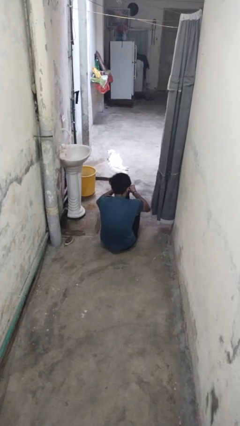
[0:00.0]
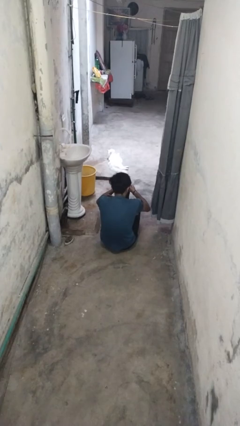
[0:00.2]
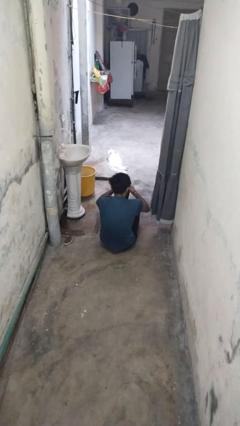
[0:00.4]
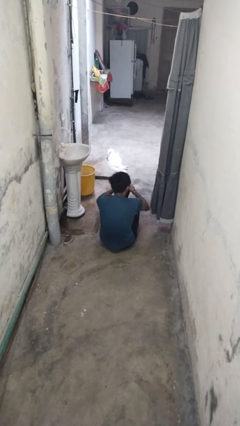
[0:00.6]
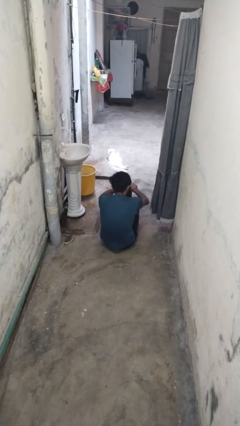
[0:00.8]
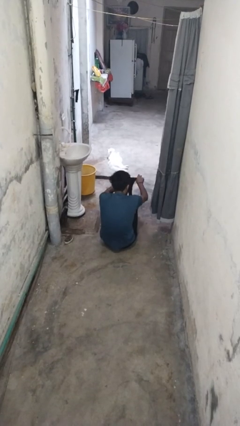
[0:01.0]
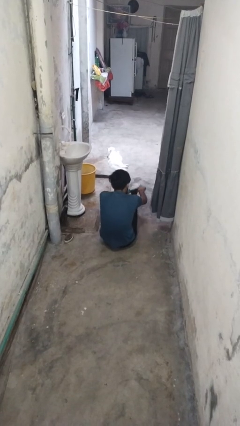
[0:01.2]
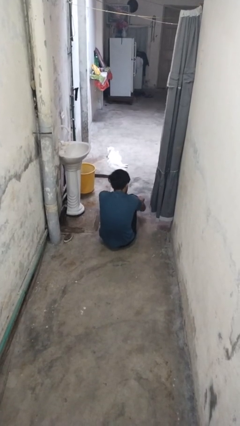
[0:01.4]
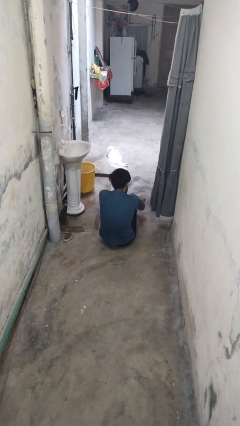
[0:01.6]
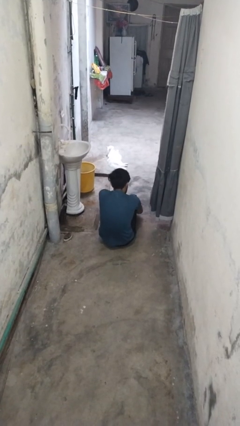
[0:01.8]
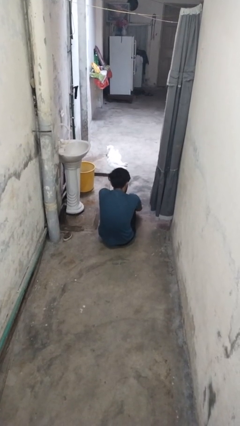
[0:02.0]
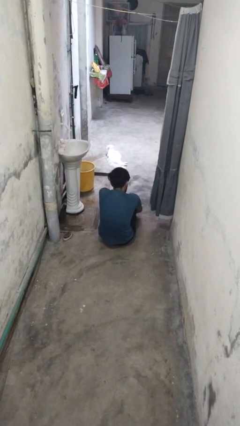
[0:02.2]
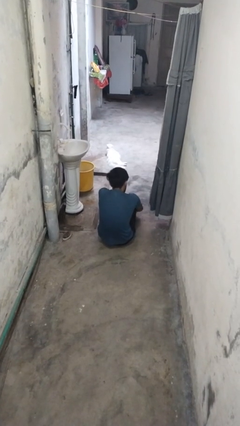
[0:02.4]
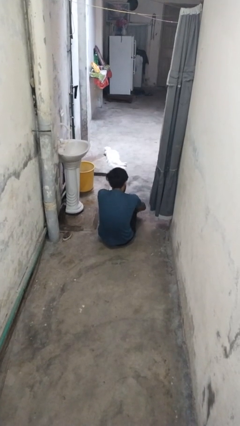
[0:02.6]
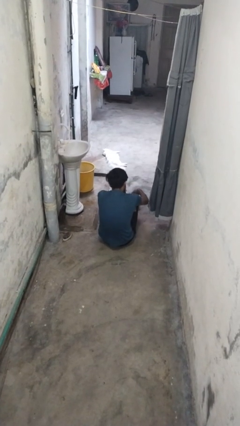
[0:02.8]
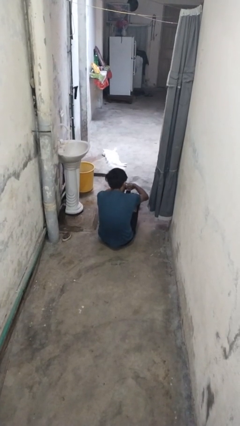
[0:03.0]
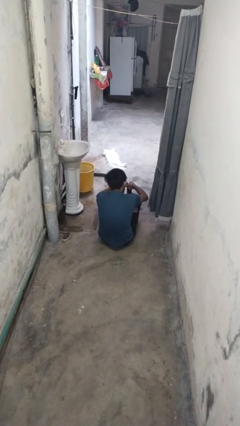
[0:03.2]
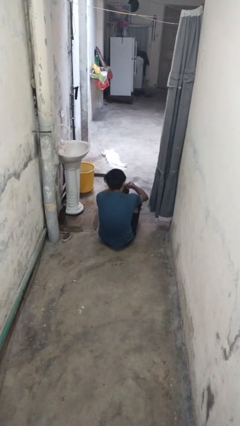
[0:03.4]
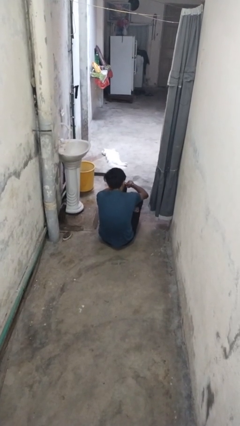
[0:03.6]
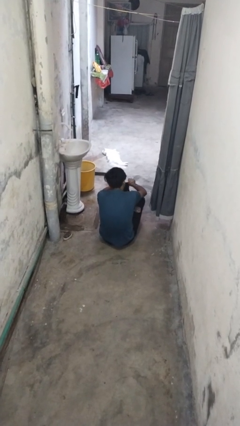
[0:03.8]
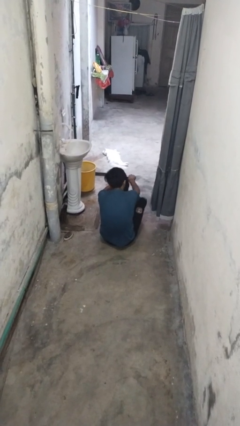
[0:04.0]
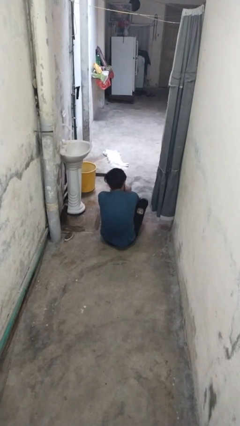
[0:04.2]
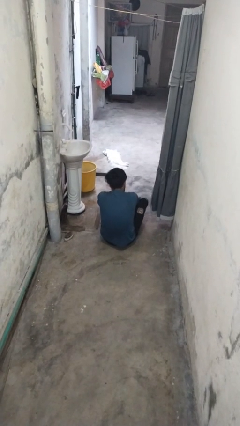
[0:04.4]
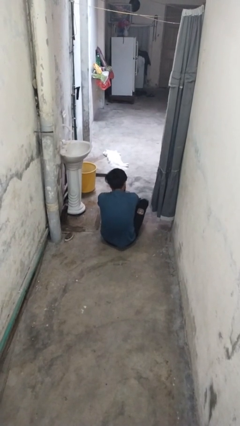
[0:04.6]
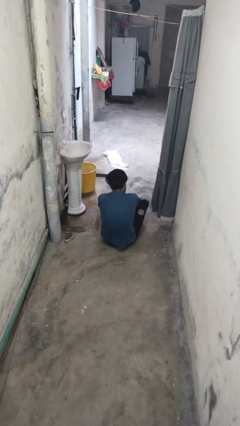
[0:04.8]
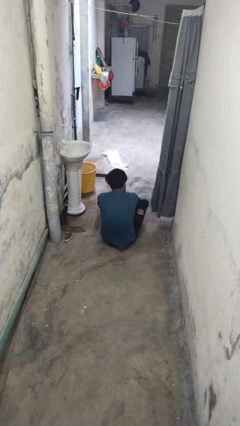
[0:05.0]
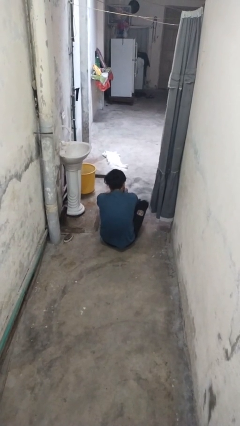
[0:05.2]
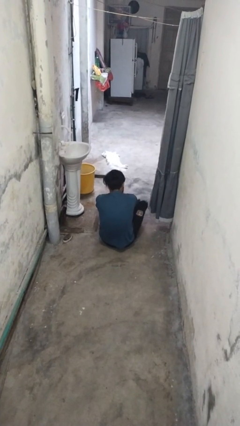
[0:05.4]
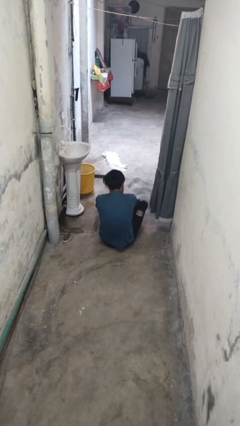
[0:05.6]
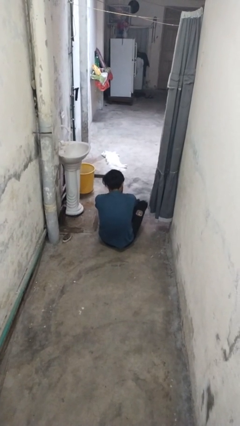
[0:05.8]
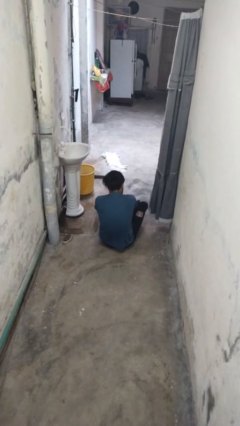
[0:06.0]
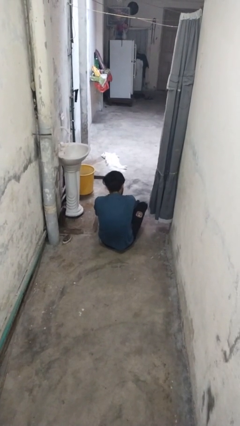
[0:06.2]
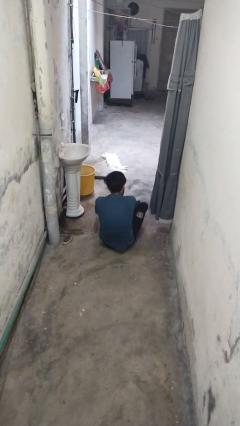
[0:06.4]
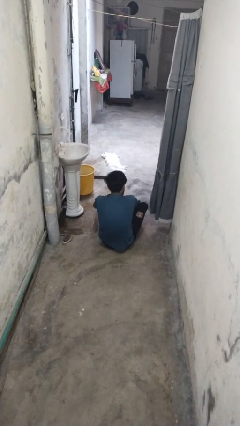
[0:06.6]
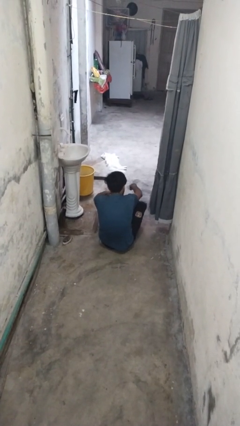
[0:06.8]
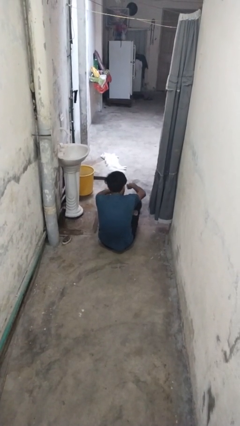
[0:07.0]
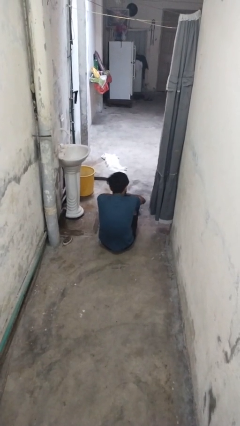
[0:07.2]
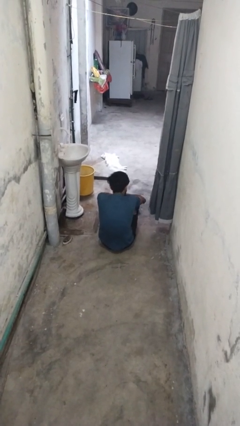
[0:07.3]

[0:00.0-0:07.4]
person puts on socks

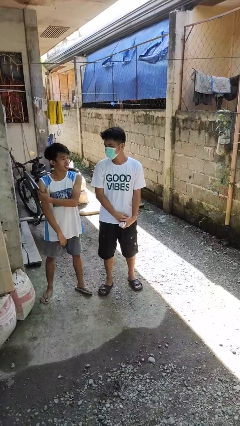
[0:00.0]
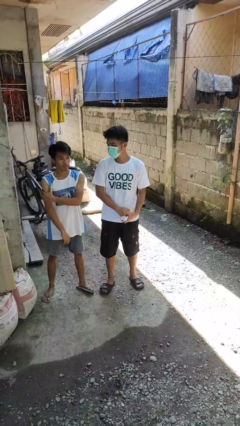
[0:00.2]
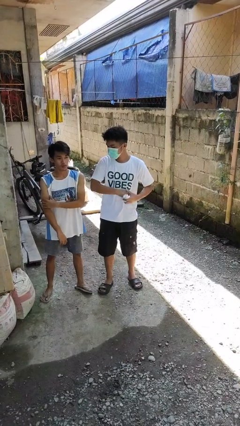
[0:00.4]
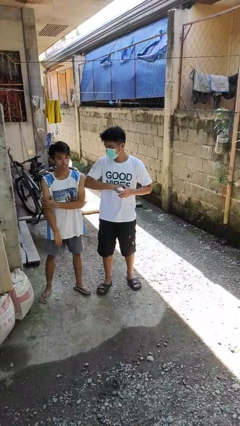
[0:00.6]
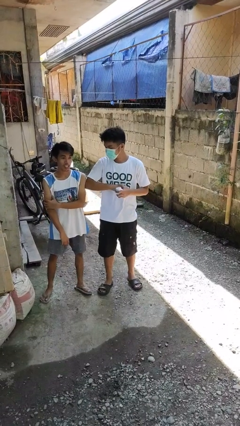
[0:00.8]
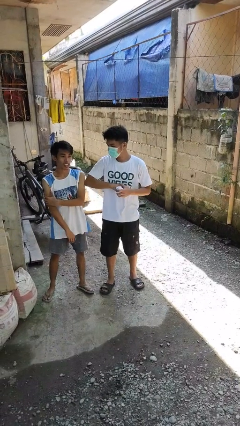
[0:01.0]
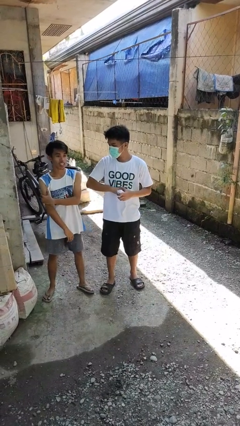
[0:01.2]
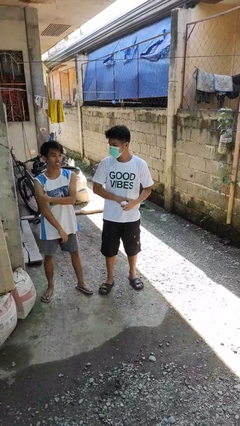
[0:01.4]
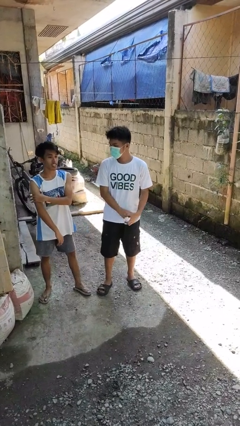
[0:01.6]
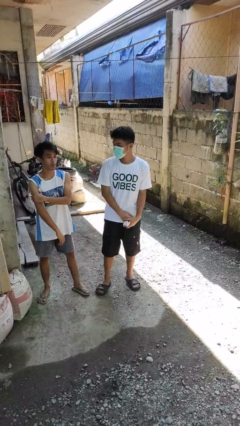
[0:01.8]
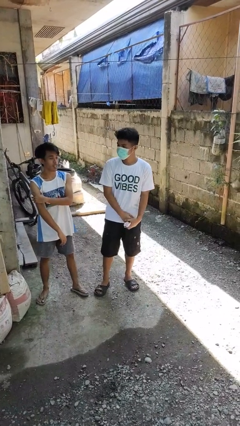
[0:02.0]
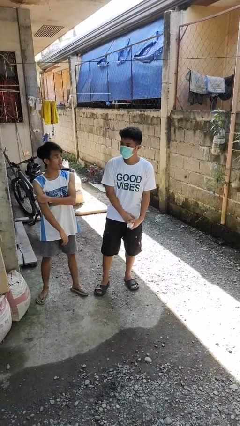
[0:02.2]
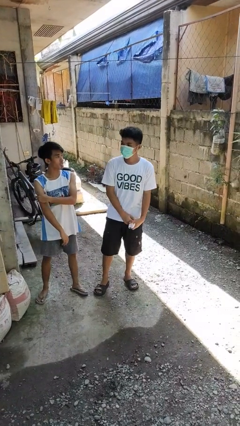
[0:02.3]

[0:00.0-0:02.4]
person nudges person with elbow

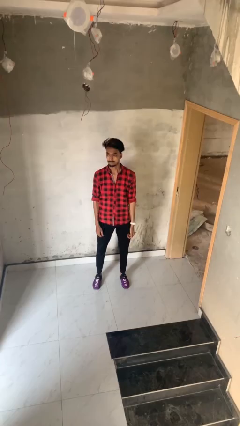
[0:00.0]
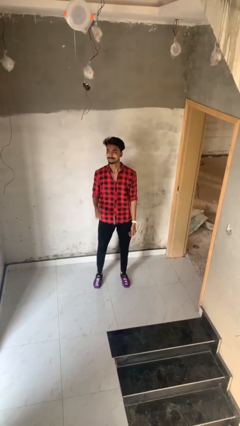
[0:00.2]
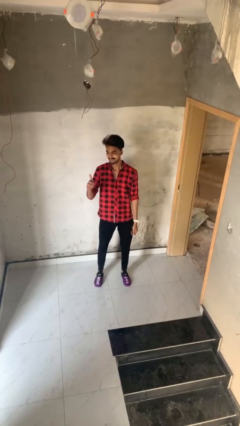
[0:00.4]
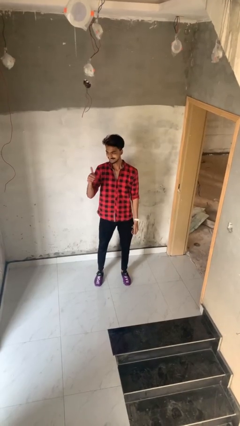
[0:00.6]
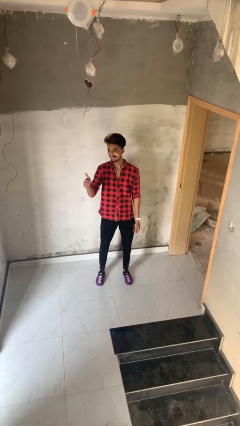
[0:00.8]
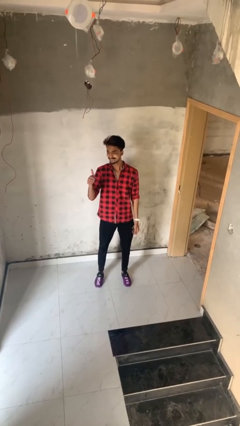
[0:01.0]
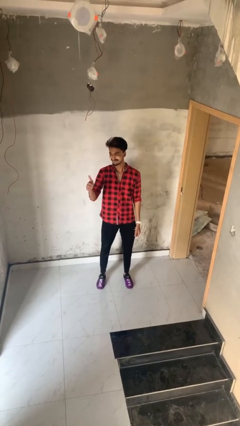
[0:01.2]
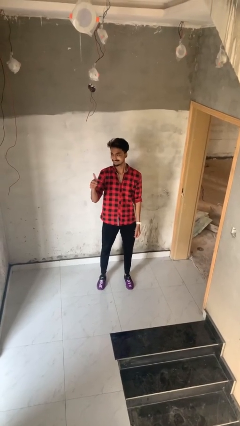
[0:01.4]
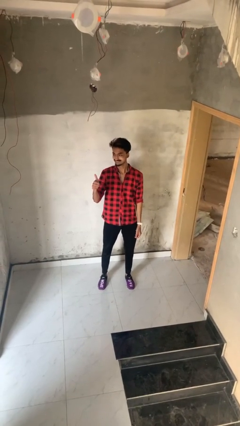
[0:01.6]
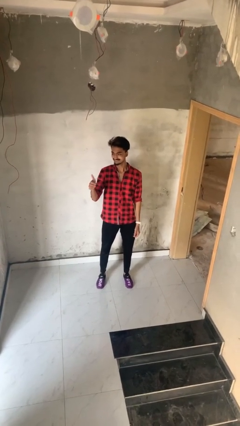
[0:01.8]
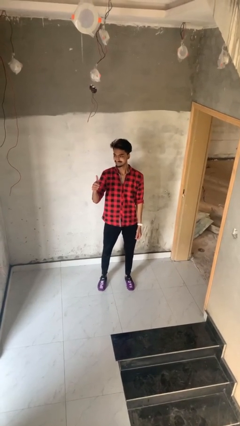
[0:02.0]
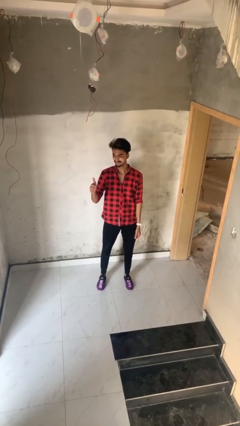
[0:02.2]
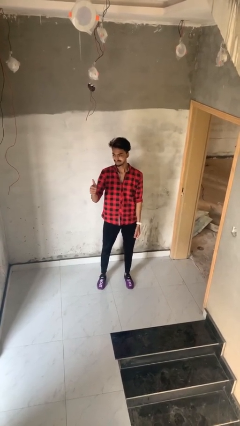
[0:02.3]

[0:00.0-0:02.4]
person gestures thumbs up

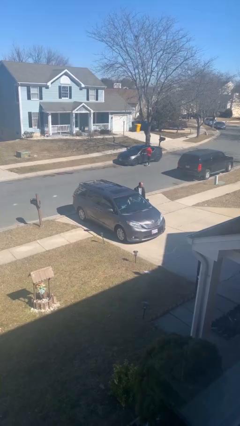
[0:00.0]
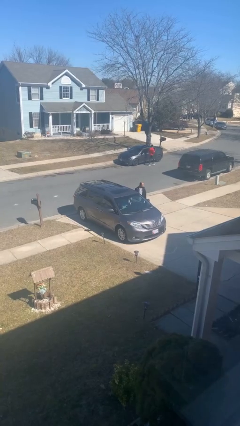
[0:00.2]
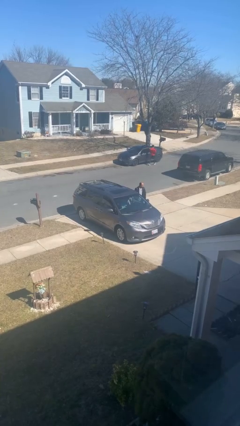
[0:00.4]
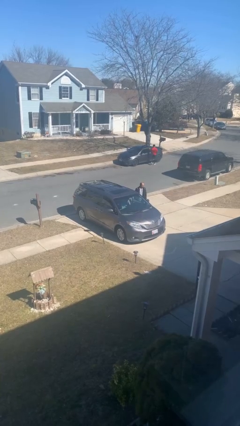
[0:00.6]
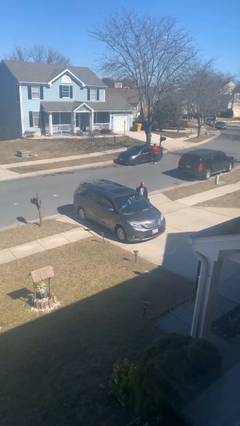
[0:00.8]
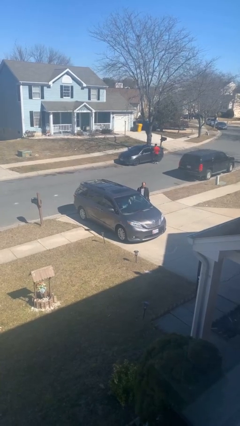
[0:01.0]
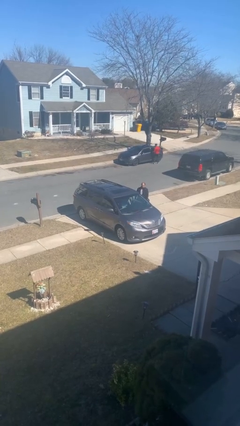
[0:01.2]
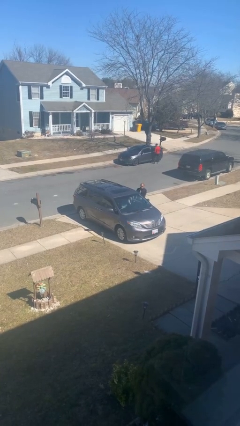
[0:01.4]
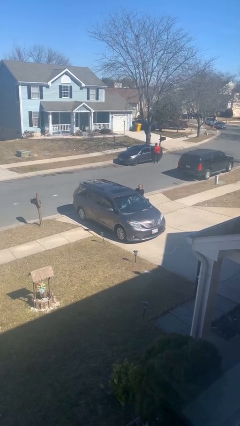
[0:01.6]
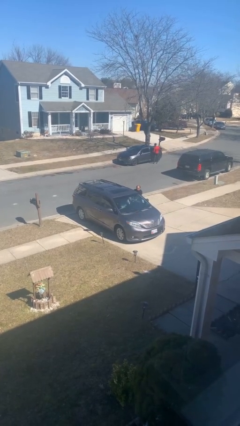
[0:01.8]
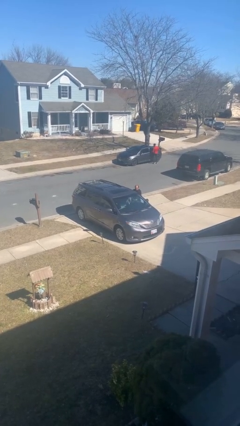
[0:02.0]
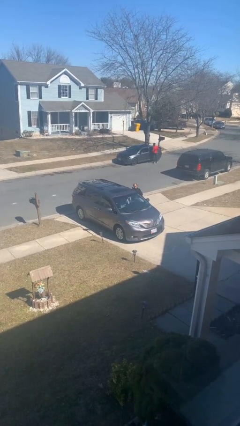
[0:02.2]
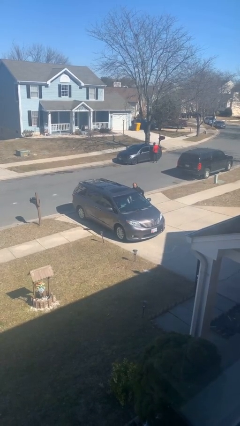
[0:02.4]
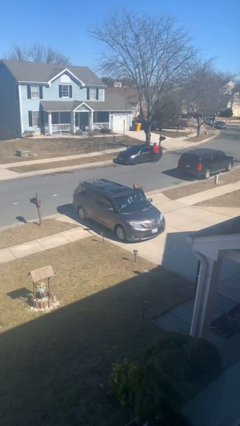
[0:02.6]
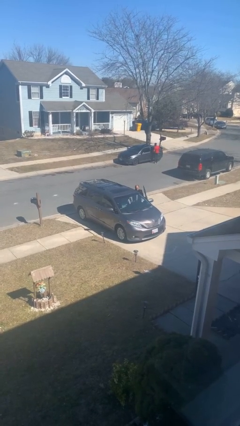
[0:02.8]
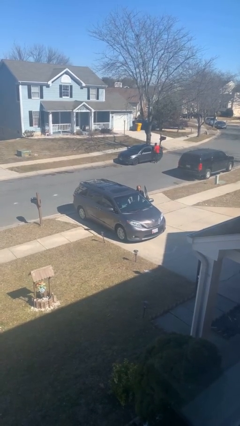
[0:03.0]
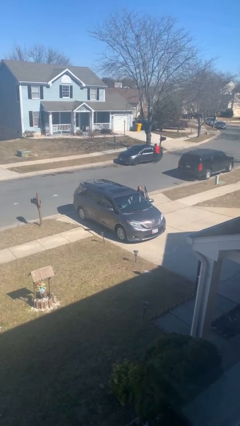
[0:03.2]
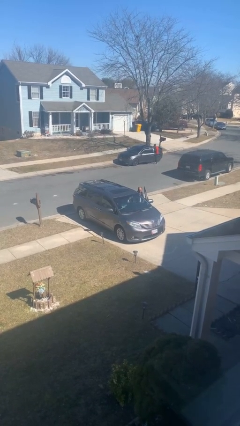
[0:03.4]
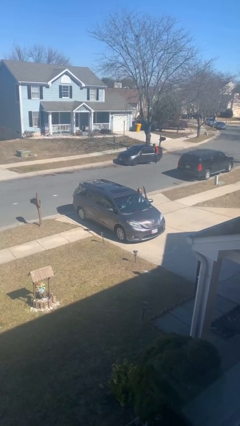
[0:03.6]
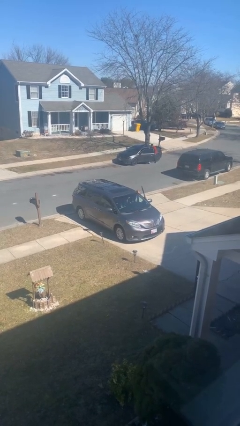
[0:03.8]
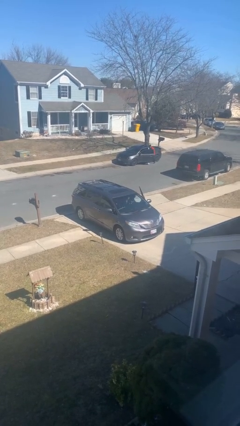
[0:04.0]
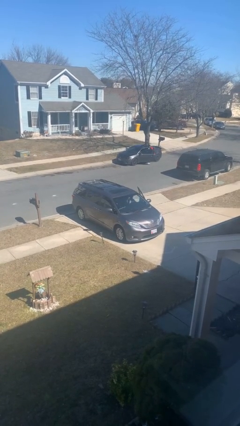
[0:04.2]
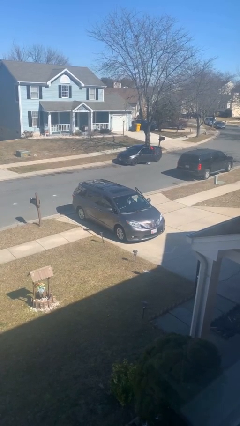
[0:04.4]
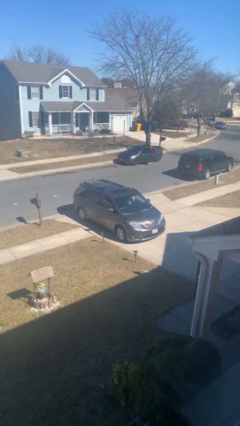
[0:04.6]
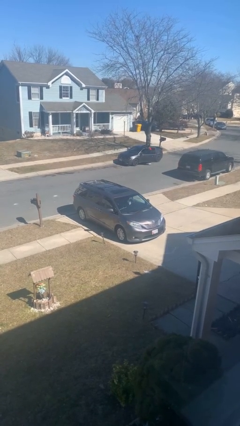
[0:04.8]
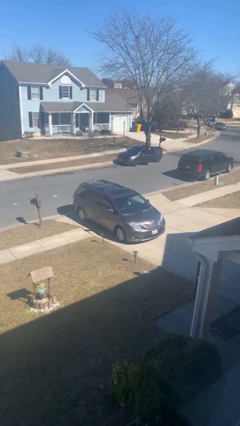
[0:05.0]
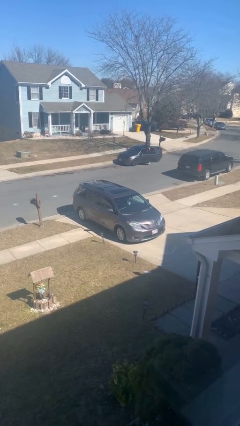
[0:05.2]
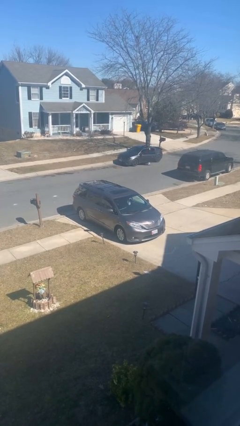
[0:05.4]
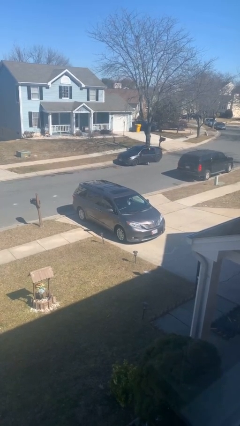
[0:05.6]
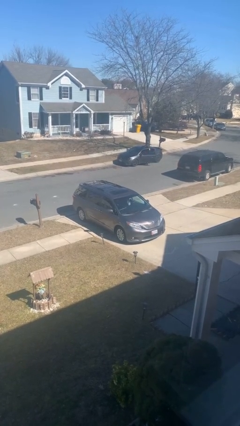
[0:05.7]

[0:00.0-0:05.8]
car picks up person
